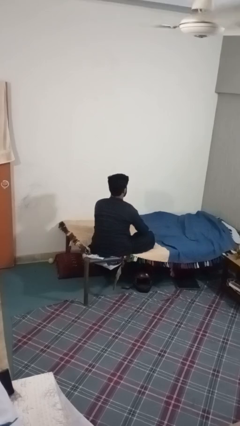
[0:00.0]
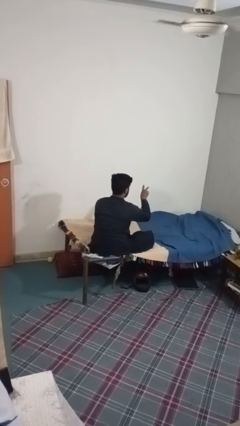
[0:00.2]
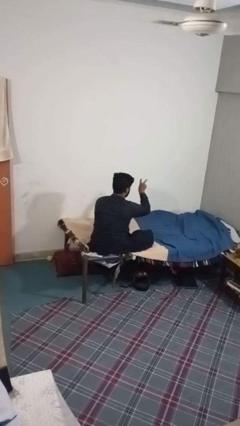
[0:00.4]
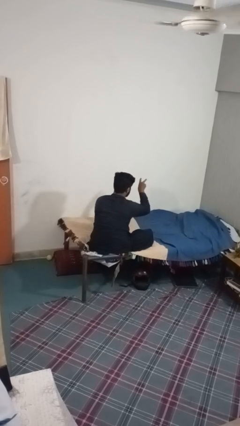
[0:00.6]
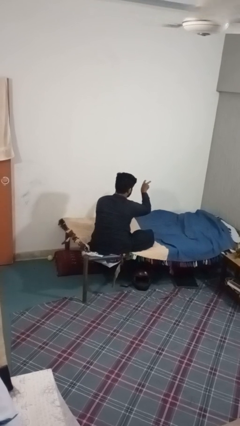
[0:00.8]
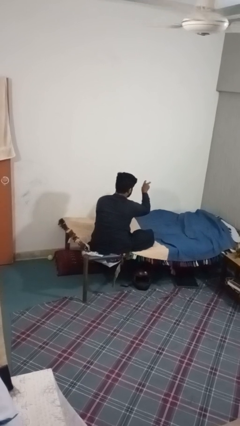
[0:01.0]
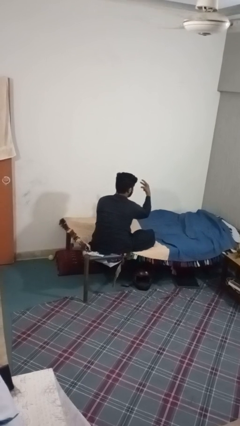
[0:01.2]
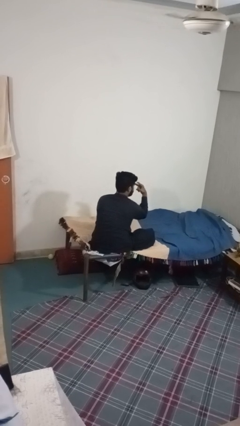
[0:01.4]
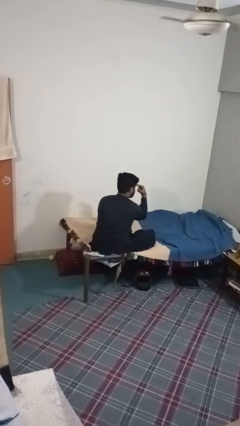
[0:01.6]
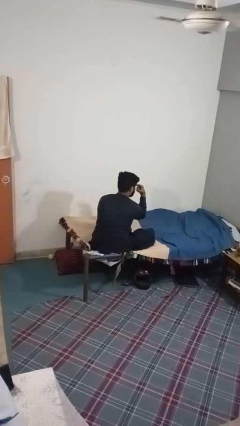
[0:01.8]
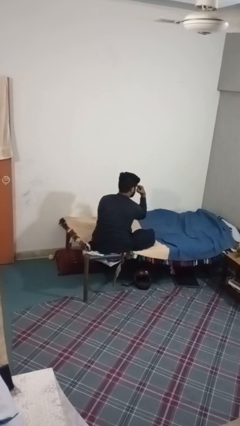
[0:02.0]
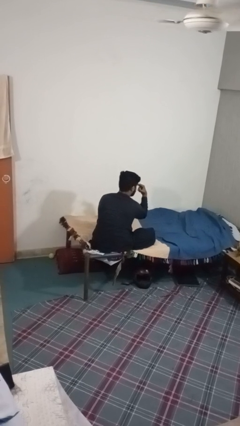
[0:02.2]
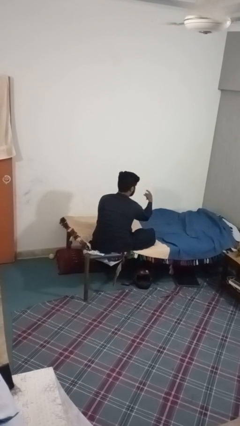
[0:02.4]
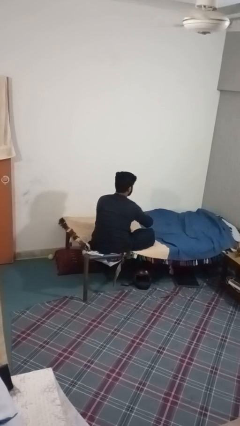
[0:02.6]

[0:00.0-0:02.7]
person gestures watch closely

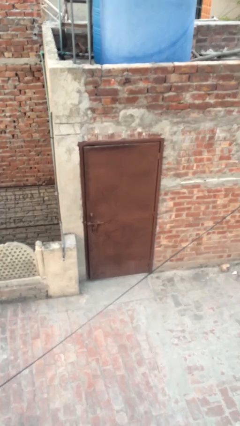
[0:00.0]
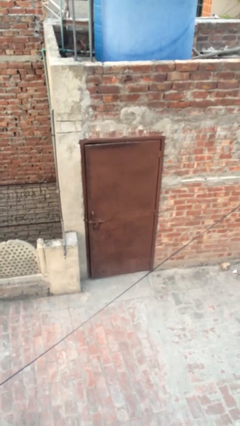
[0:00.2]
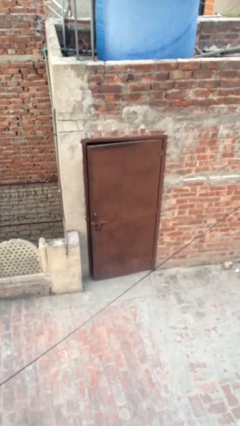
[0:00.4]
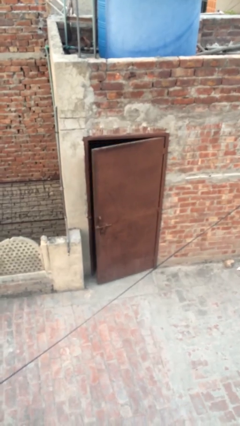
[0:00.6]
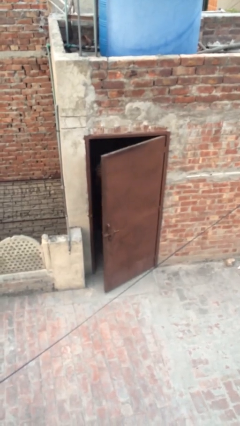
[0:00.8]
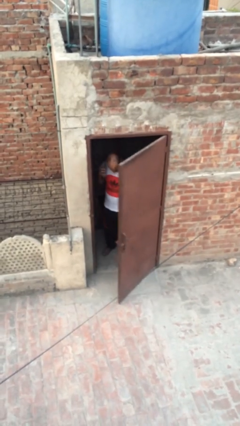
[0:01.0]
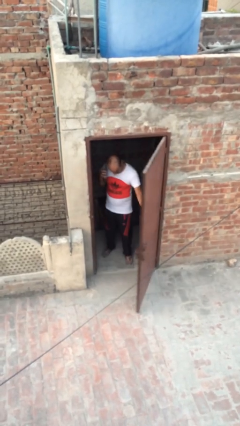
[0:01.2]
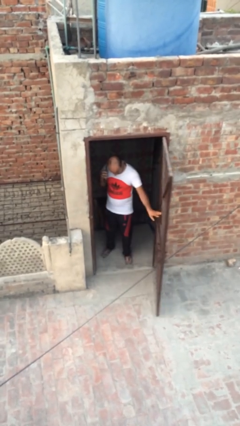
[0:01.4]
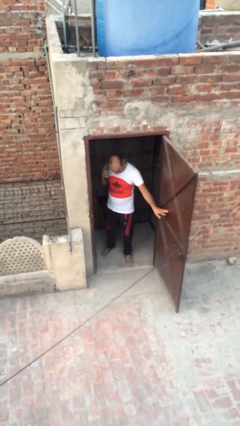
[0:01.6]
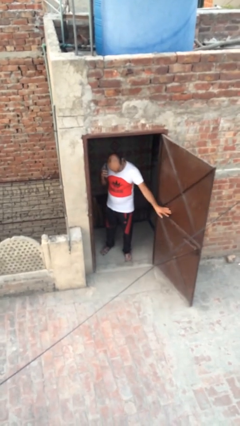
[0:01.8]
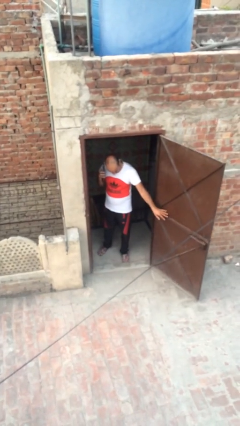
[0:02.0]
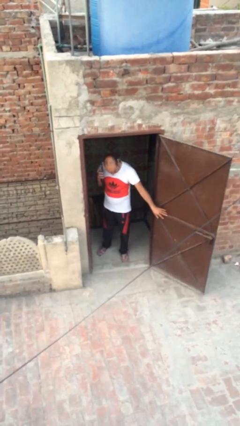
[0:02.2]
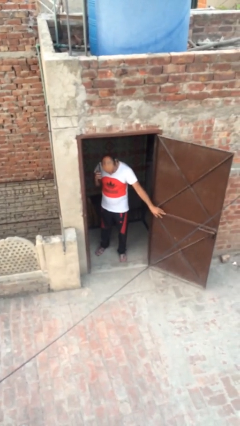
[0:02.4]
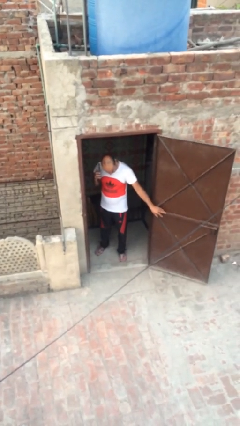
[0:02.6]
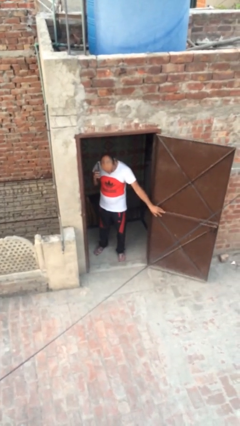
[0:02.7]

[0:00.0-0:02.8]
person opens facility door

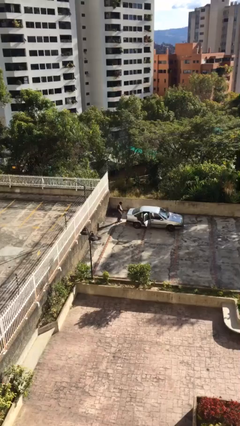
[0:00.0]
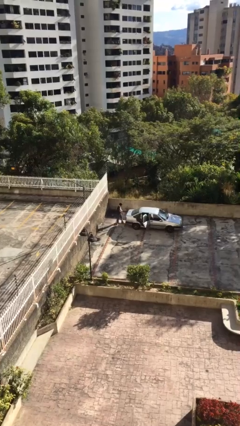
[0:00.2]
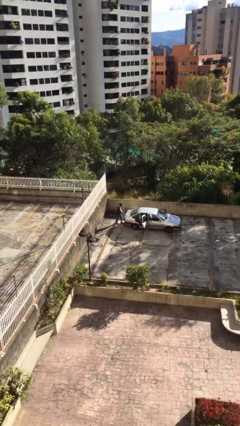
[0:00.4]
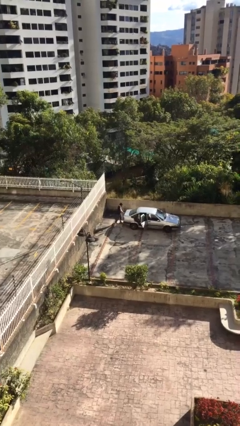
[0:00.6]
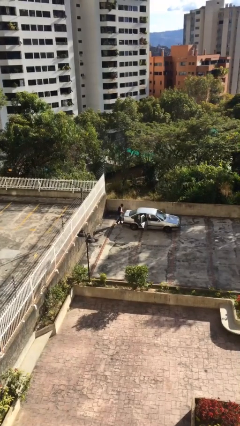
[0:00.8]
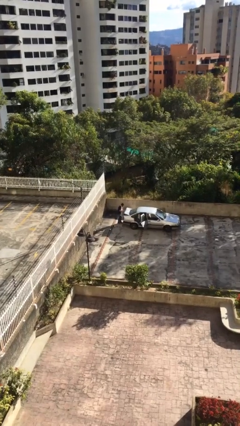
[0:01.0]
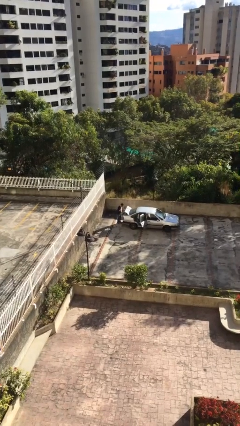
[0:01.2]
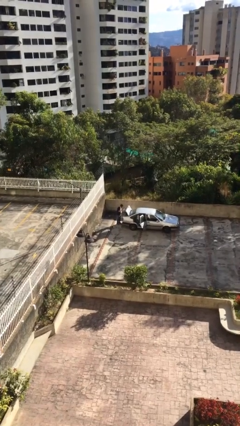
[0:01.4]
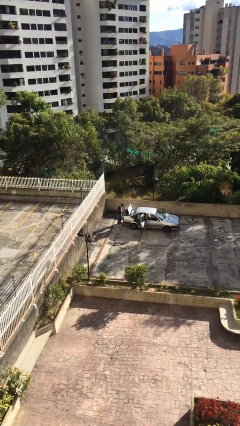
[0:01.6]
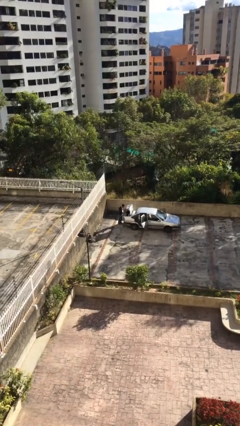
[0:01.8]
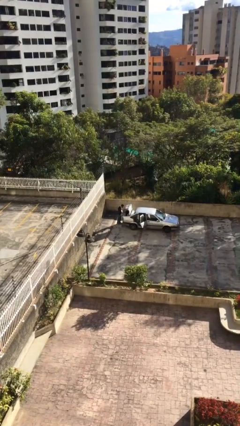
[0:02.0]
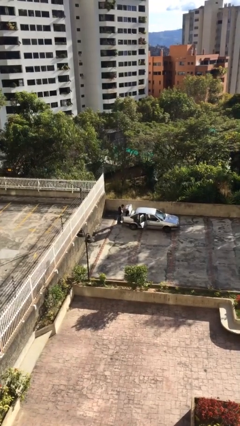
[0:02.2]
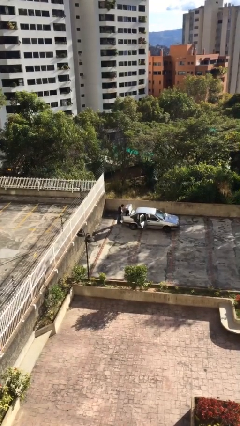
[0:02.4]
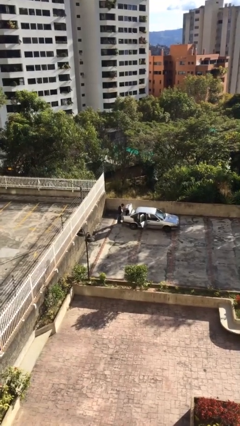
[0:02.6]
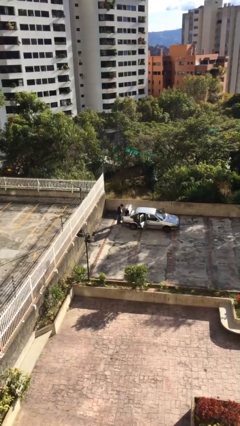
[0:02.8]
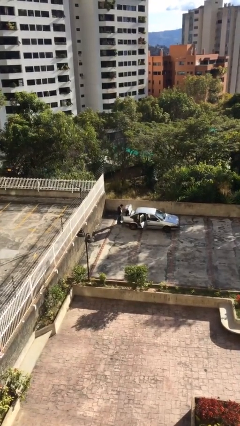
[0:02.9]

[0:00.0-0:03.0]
person opens car trunk

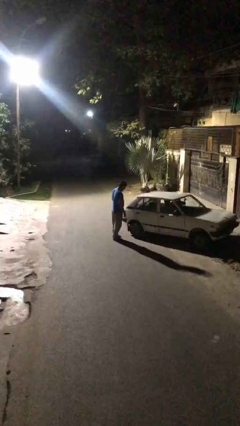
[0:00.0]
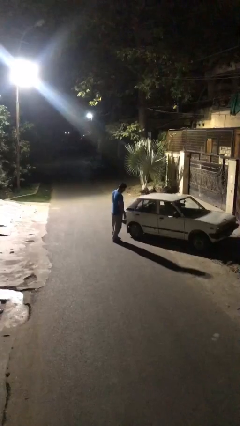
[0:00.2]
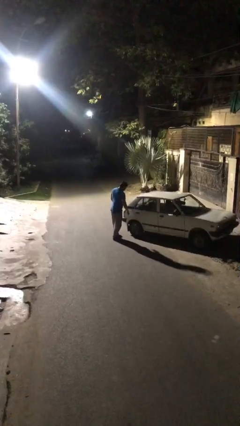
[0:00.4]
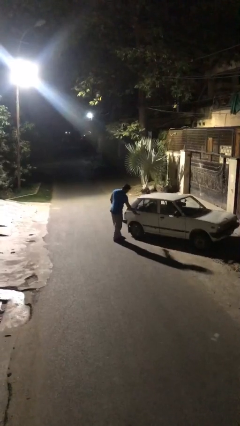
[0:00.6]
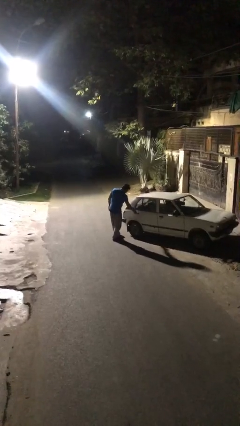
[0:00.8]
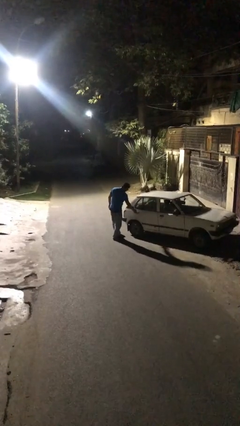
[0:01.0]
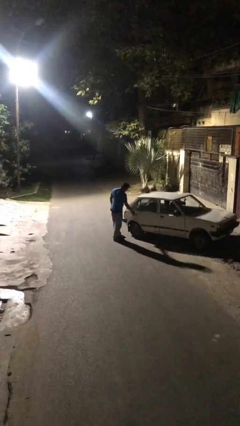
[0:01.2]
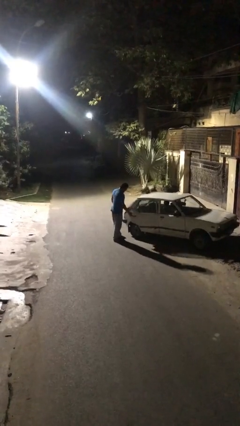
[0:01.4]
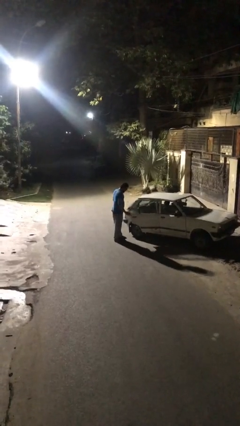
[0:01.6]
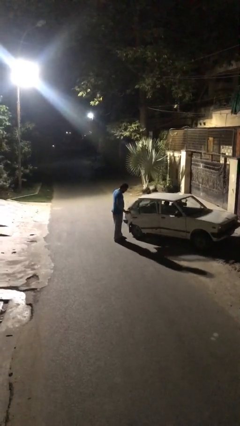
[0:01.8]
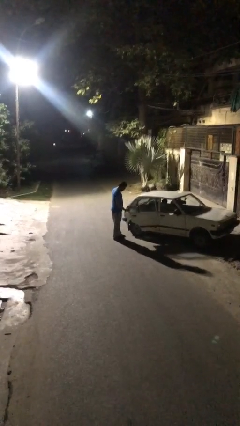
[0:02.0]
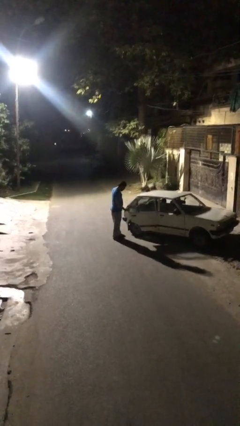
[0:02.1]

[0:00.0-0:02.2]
person opens car door

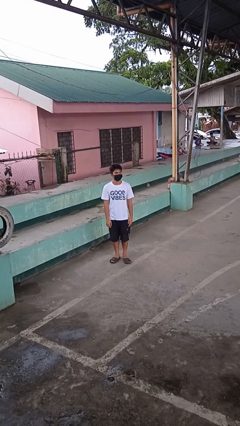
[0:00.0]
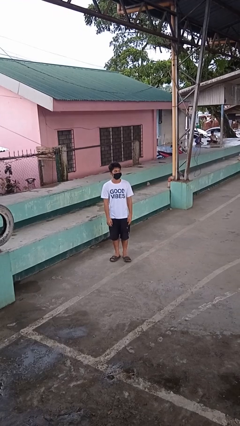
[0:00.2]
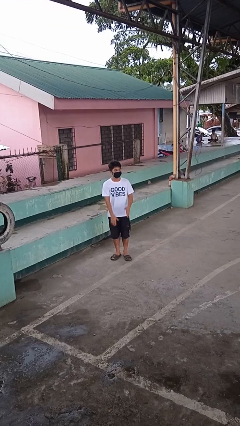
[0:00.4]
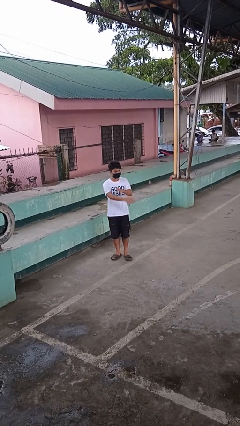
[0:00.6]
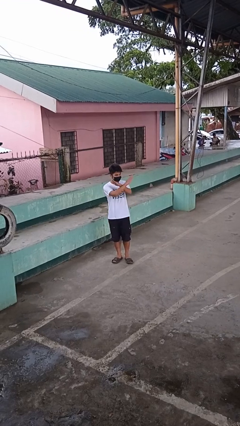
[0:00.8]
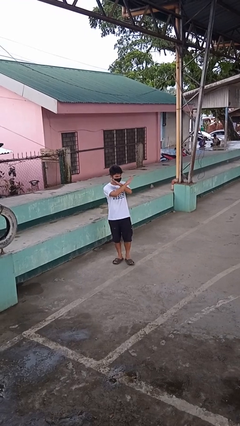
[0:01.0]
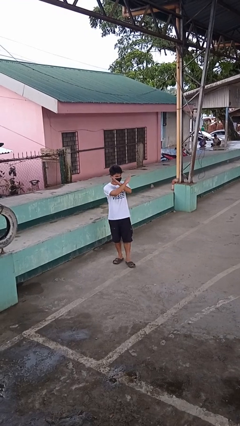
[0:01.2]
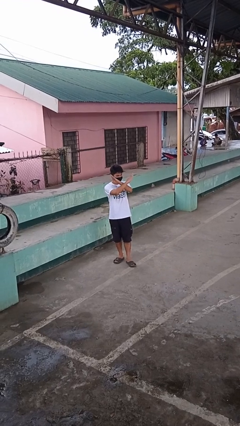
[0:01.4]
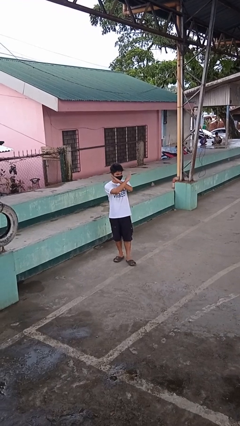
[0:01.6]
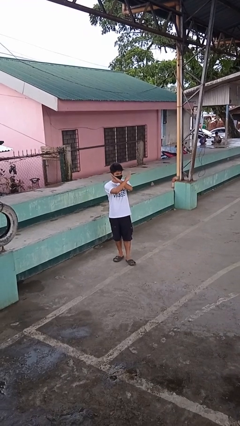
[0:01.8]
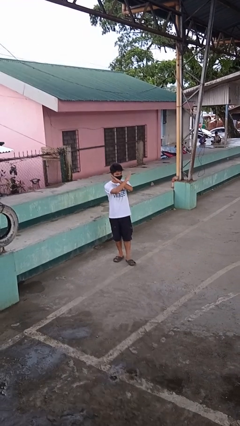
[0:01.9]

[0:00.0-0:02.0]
person gestures arms x

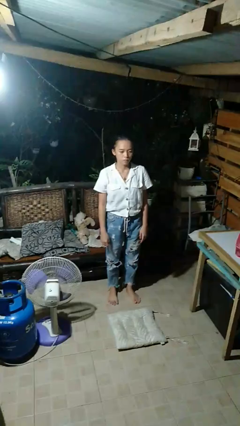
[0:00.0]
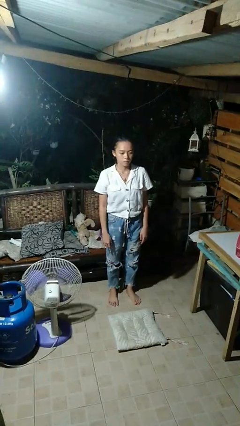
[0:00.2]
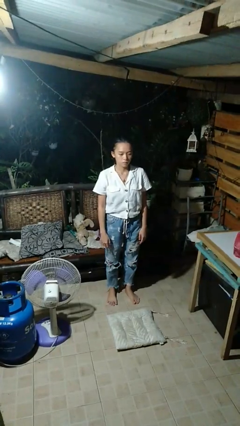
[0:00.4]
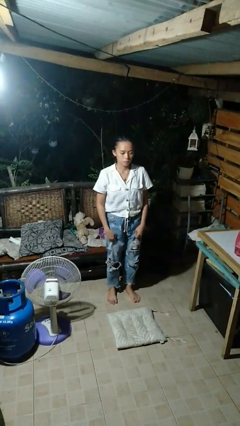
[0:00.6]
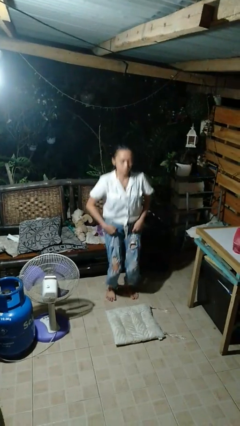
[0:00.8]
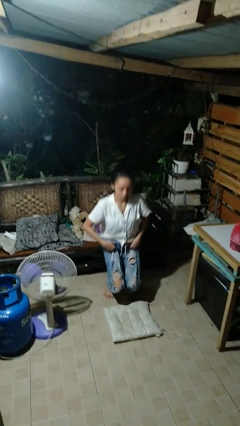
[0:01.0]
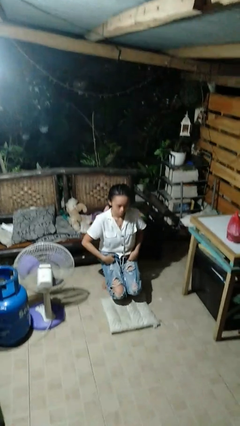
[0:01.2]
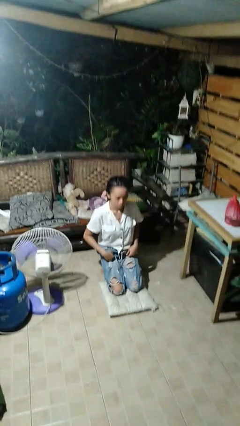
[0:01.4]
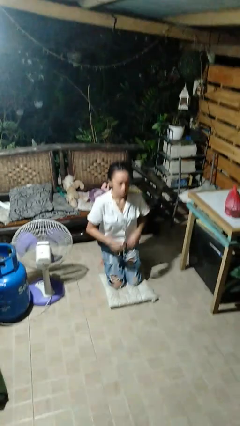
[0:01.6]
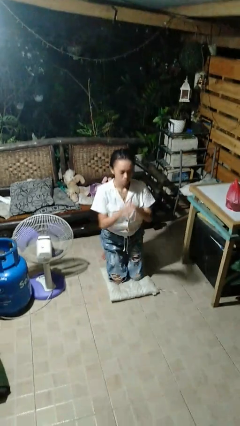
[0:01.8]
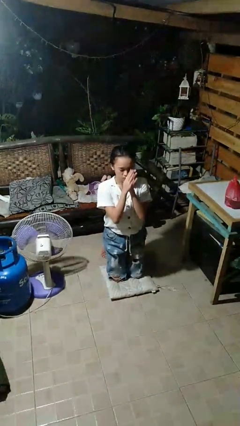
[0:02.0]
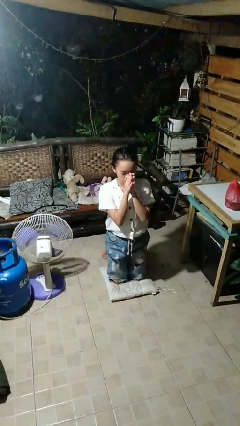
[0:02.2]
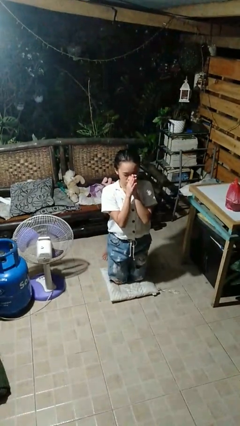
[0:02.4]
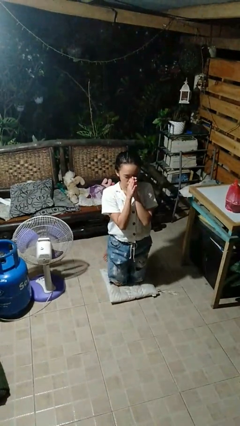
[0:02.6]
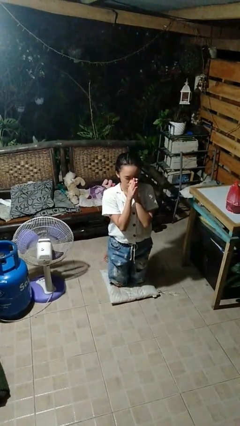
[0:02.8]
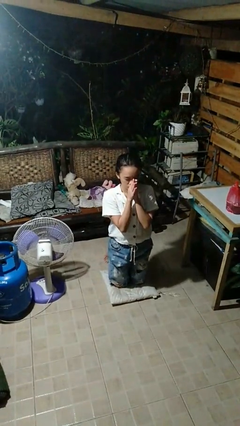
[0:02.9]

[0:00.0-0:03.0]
person prays

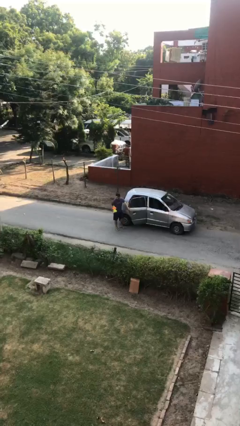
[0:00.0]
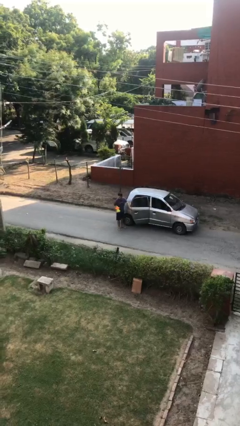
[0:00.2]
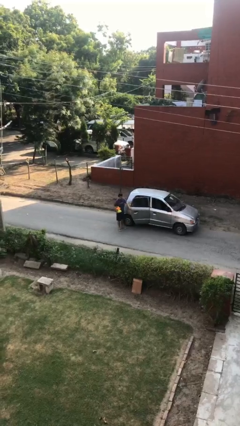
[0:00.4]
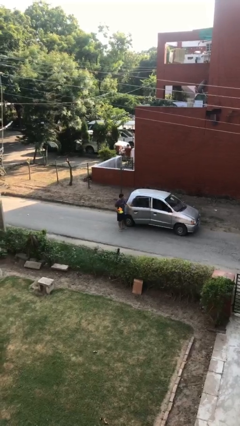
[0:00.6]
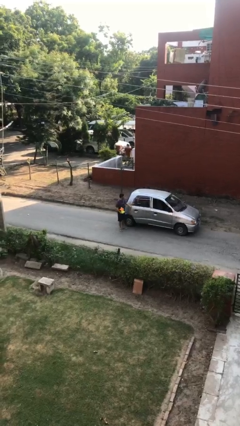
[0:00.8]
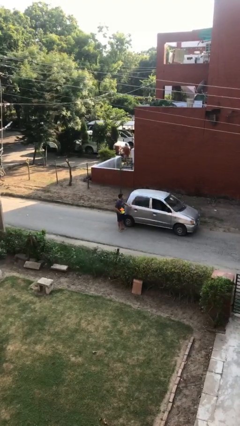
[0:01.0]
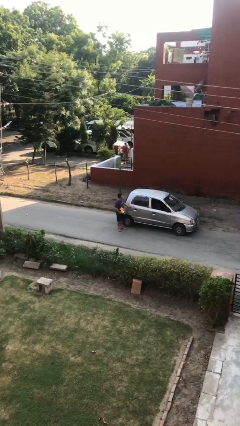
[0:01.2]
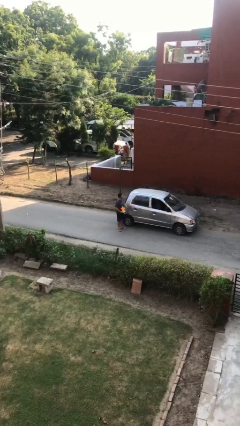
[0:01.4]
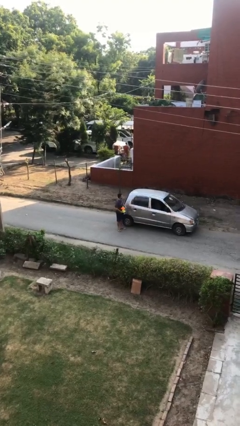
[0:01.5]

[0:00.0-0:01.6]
person closes car door
